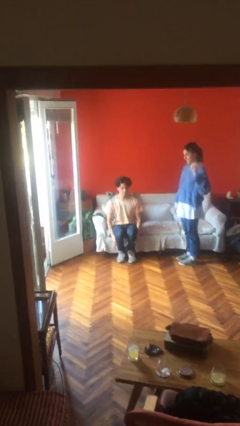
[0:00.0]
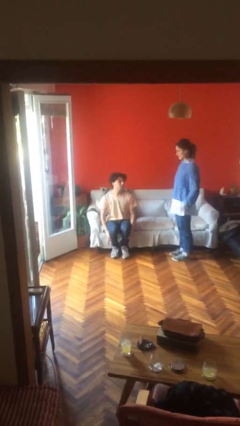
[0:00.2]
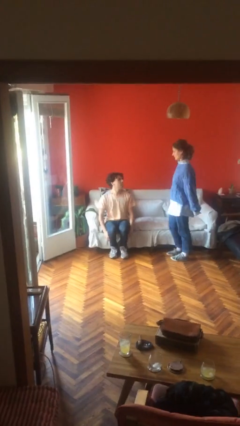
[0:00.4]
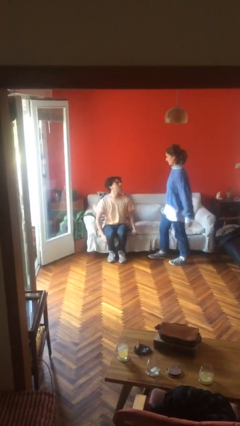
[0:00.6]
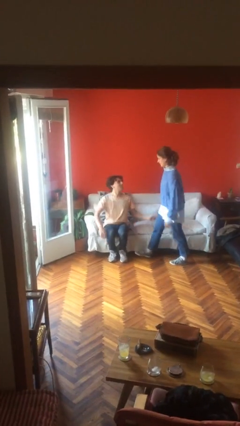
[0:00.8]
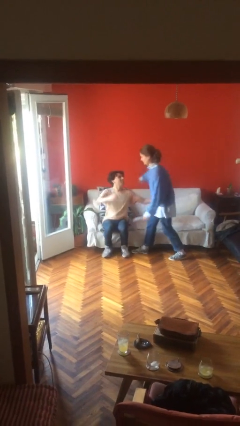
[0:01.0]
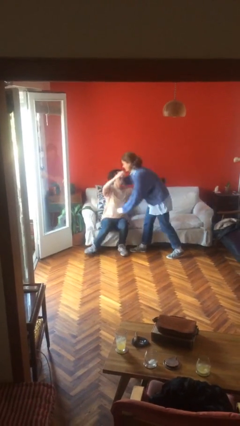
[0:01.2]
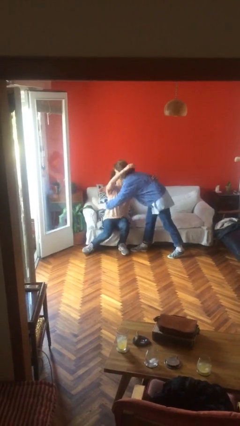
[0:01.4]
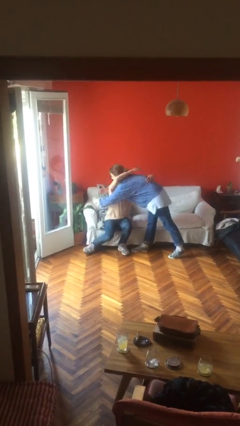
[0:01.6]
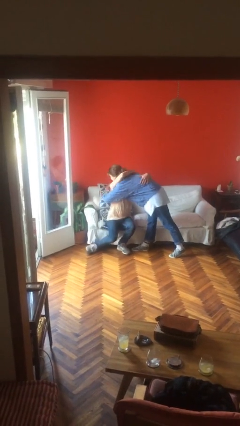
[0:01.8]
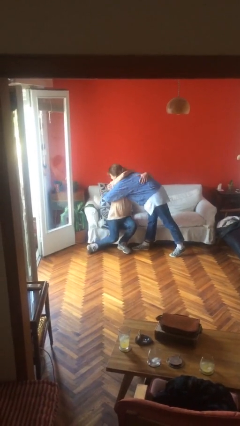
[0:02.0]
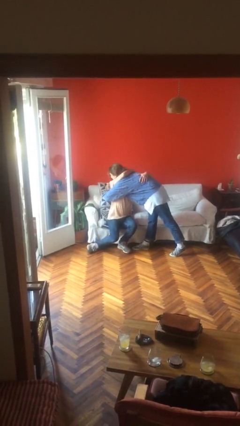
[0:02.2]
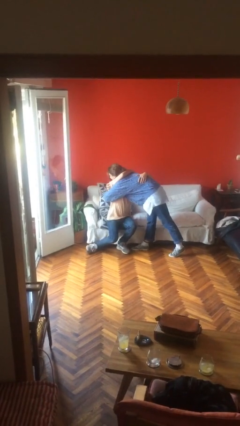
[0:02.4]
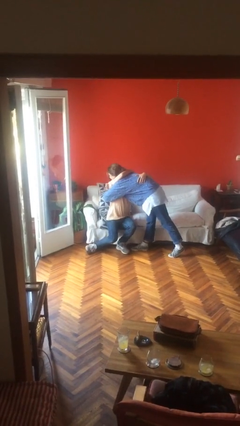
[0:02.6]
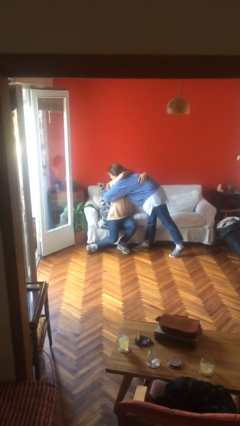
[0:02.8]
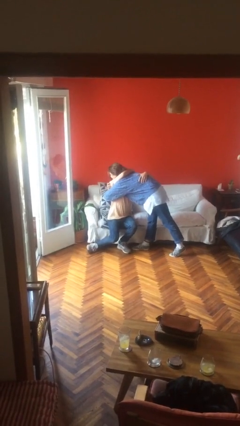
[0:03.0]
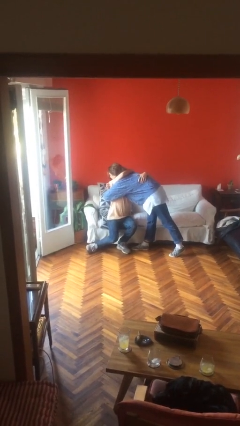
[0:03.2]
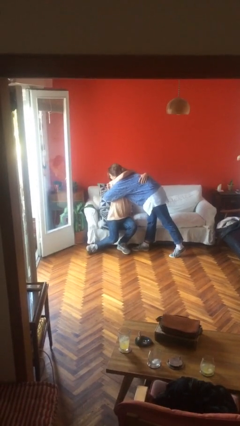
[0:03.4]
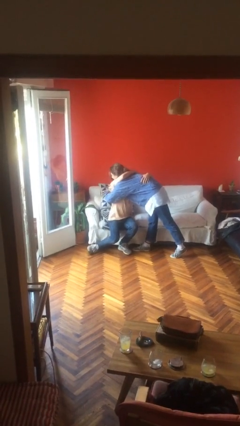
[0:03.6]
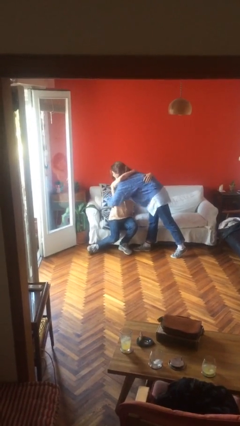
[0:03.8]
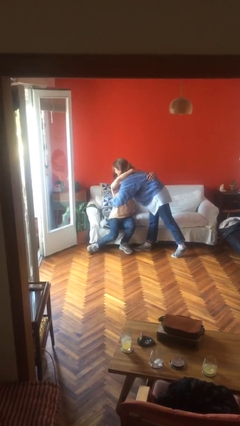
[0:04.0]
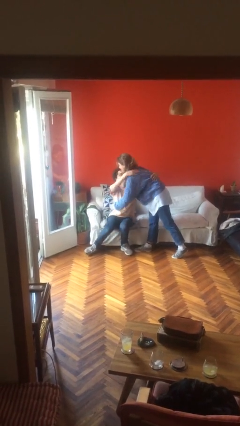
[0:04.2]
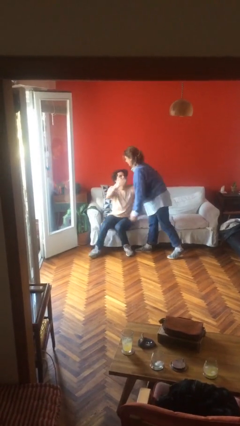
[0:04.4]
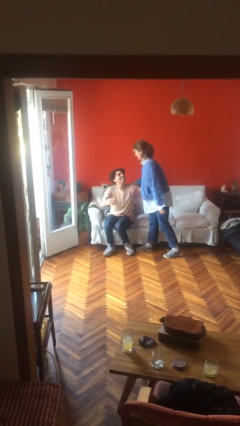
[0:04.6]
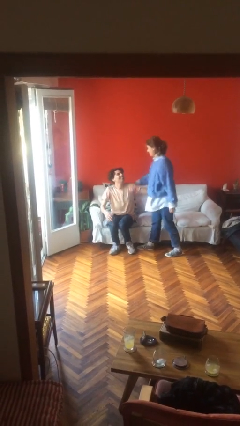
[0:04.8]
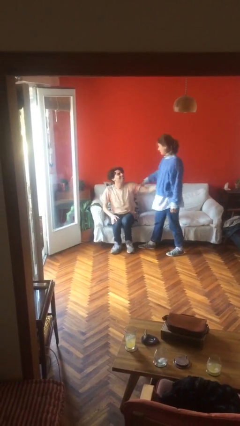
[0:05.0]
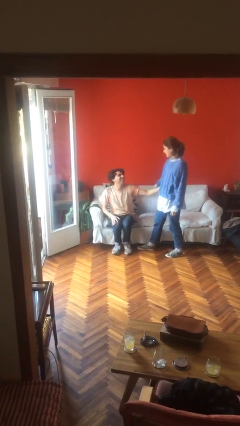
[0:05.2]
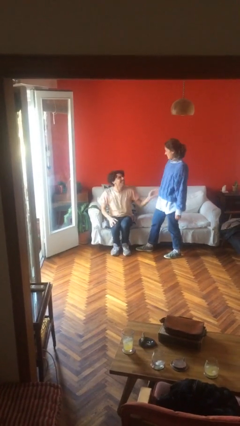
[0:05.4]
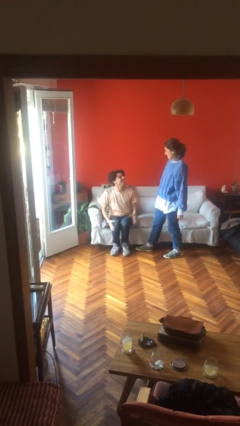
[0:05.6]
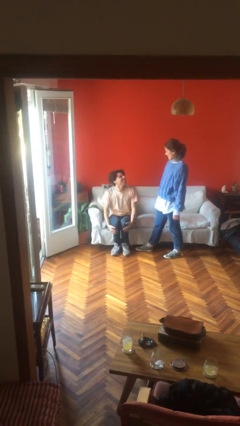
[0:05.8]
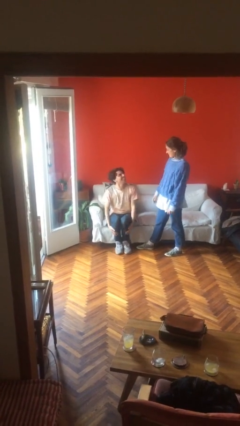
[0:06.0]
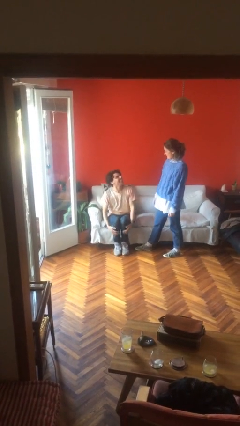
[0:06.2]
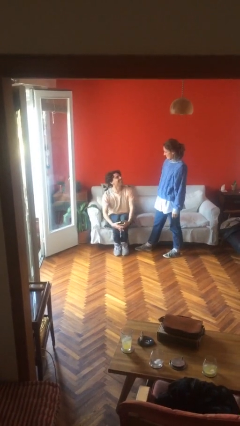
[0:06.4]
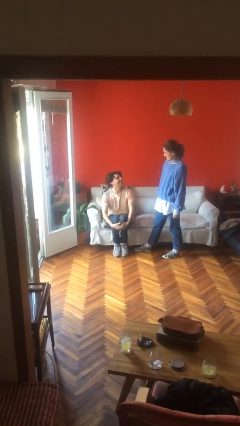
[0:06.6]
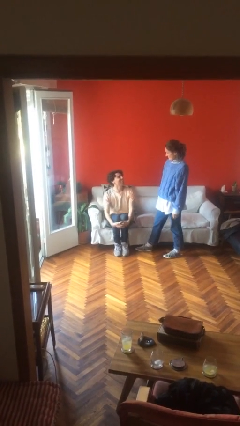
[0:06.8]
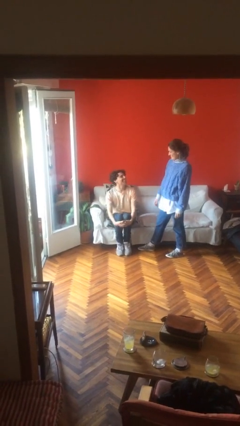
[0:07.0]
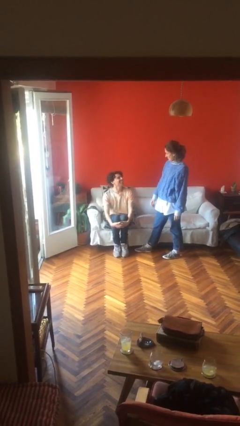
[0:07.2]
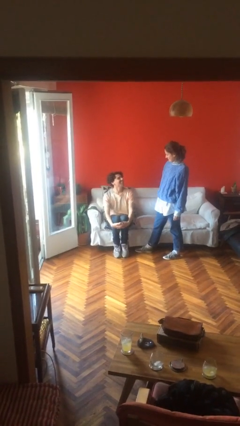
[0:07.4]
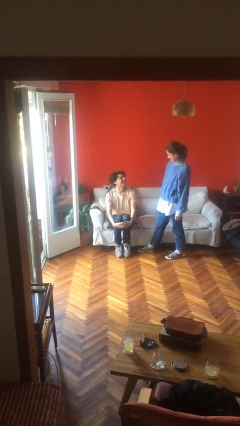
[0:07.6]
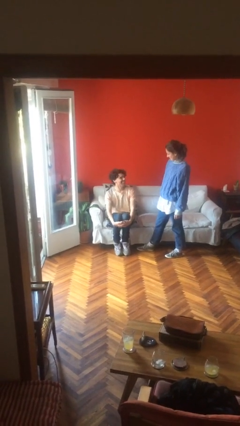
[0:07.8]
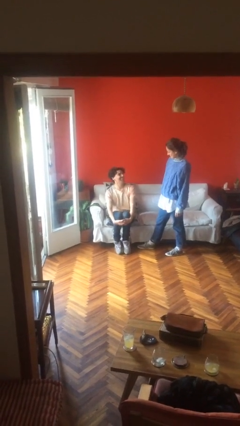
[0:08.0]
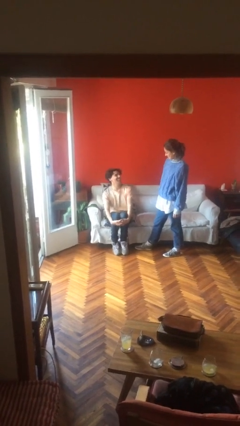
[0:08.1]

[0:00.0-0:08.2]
person embraces person

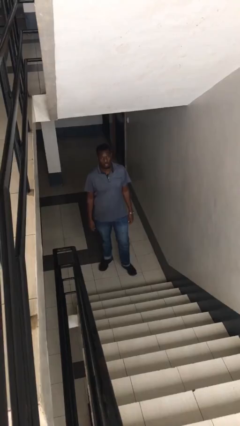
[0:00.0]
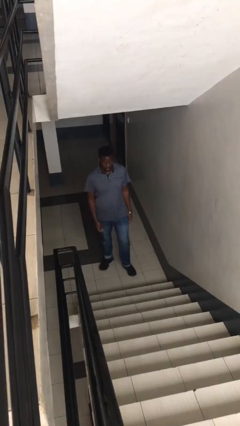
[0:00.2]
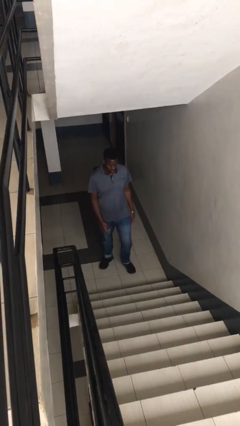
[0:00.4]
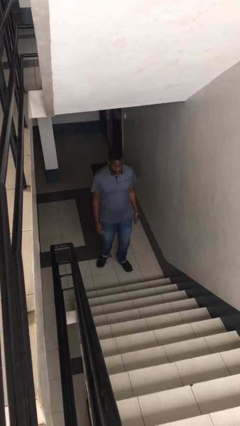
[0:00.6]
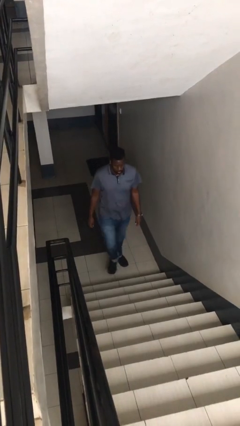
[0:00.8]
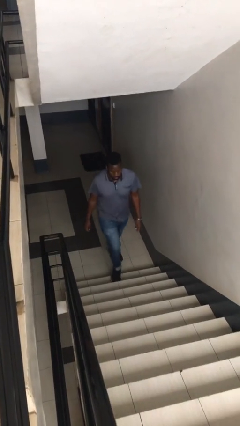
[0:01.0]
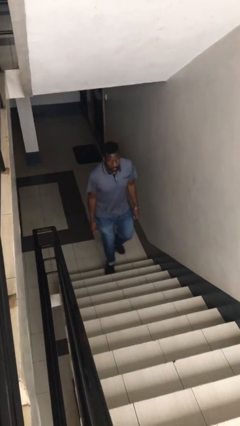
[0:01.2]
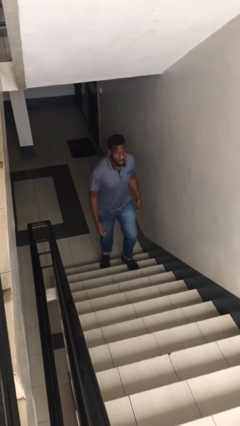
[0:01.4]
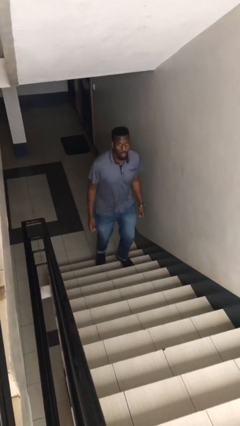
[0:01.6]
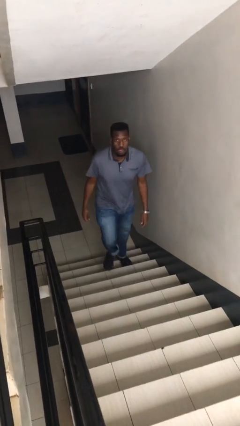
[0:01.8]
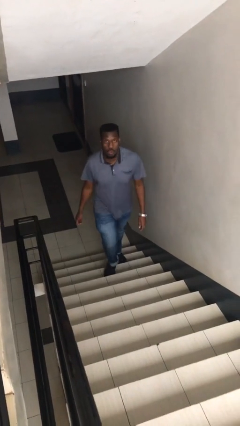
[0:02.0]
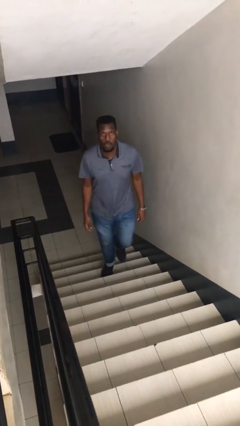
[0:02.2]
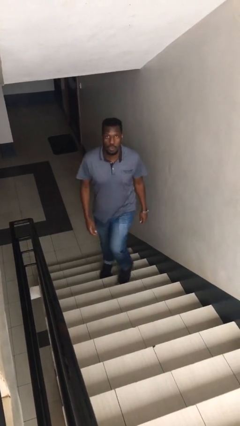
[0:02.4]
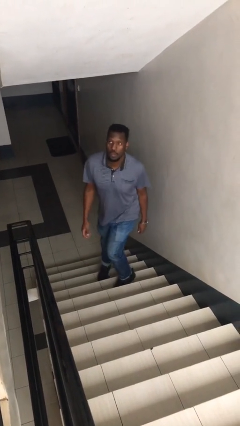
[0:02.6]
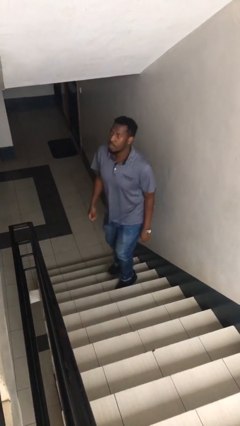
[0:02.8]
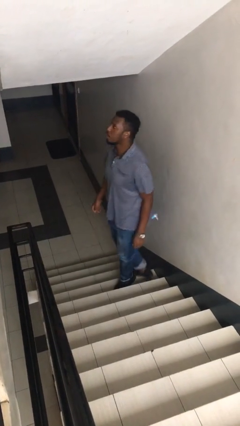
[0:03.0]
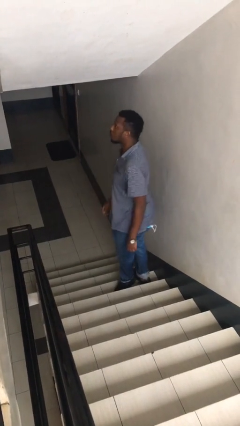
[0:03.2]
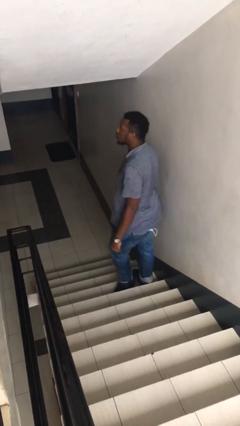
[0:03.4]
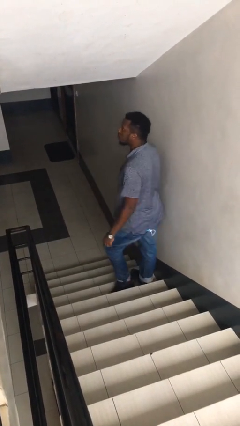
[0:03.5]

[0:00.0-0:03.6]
person climbs up stairs

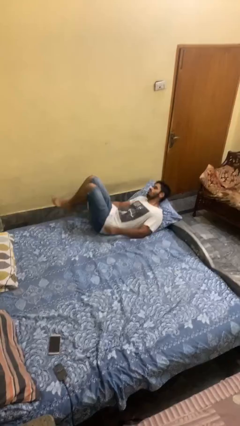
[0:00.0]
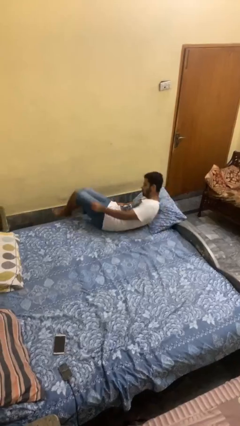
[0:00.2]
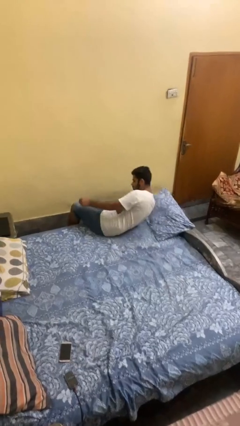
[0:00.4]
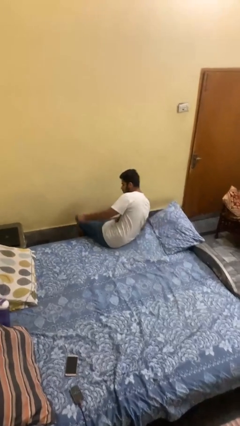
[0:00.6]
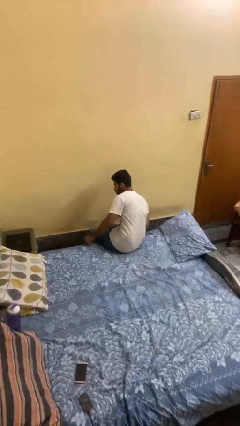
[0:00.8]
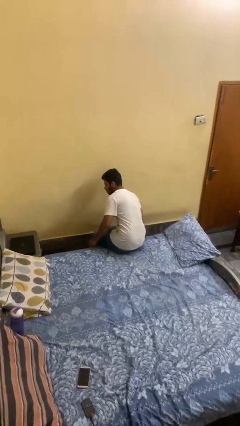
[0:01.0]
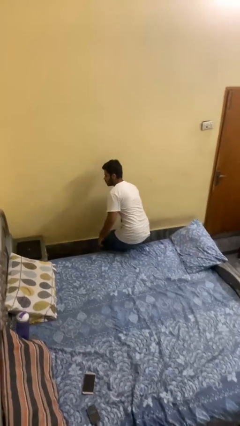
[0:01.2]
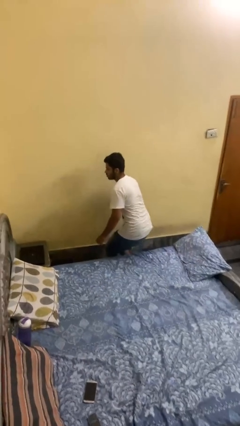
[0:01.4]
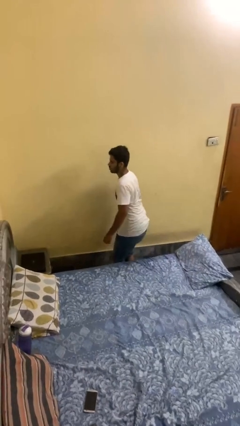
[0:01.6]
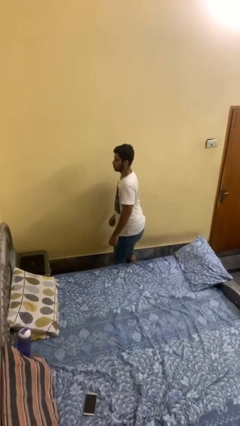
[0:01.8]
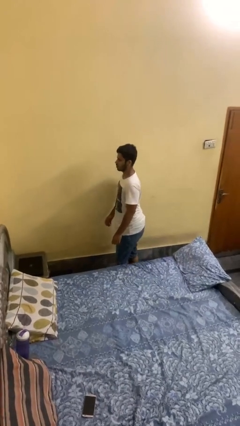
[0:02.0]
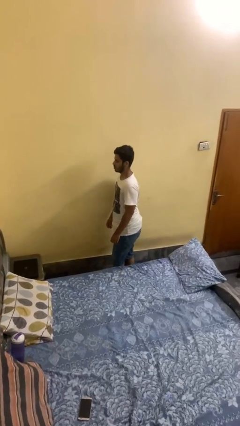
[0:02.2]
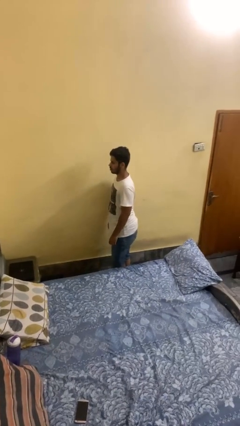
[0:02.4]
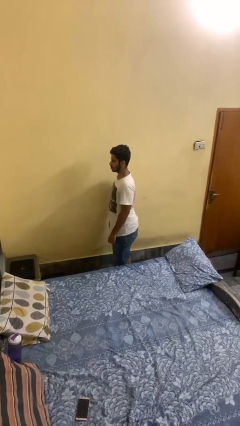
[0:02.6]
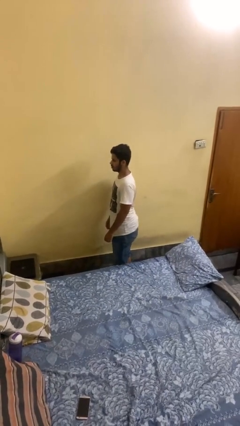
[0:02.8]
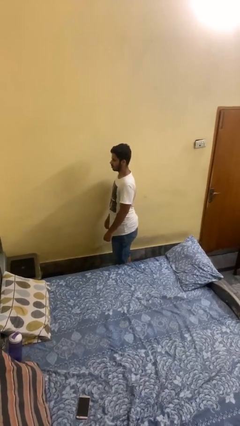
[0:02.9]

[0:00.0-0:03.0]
person stands up

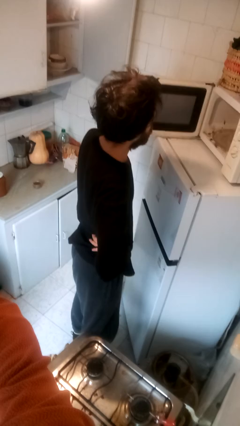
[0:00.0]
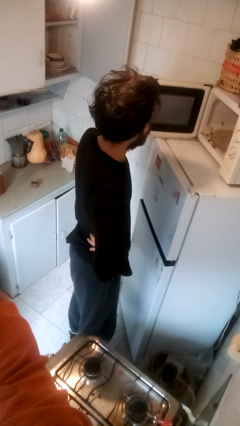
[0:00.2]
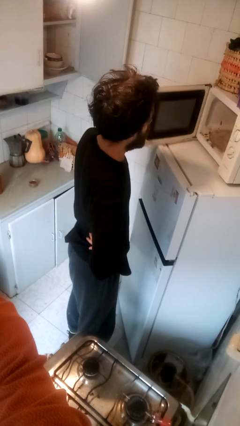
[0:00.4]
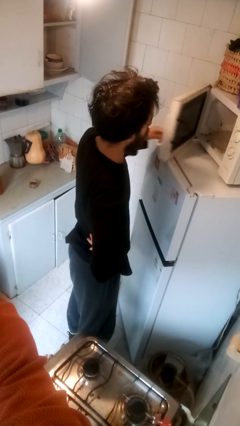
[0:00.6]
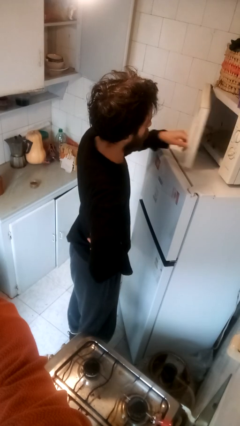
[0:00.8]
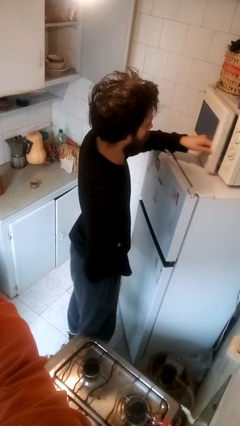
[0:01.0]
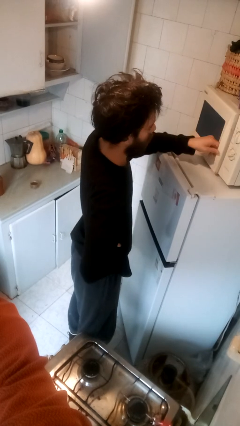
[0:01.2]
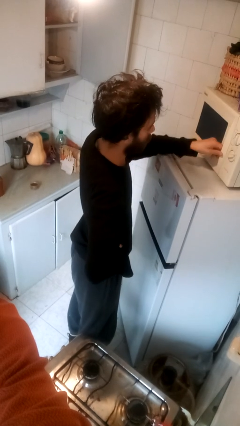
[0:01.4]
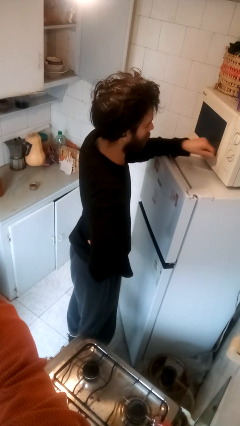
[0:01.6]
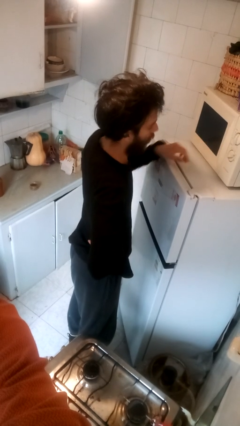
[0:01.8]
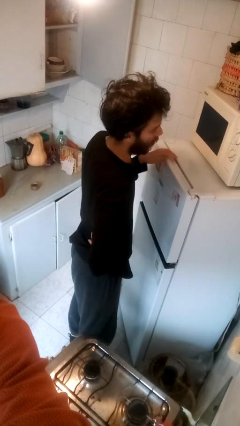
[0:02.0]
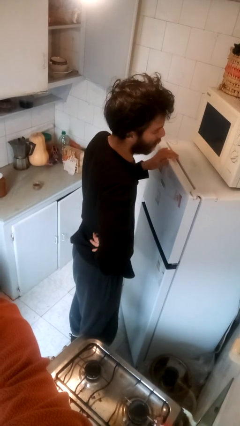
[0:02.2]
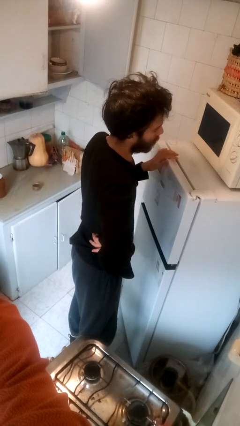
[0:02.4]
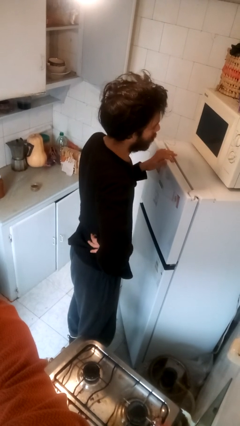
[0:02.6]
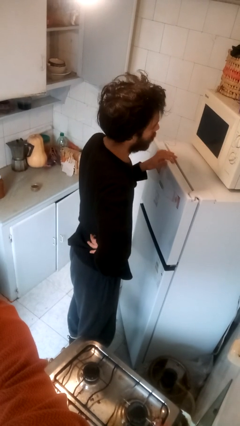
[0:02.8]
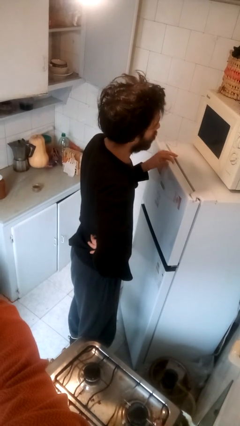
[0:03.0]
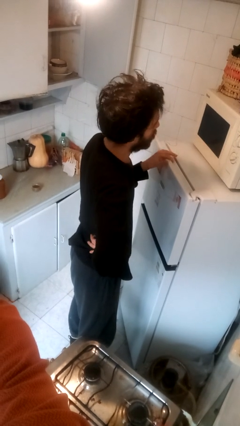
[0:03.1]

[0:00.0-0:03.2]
person closes microwave
